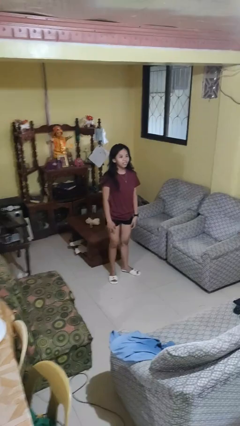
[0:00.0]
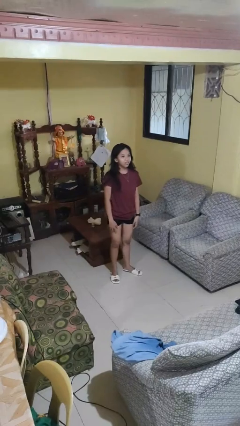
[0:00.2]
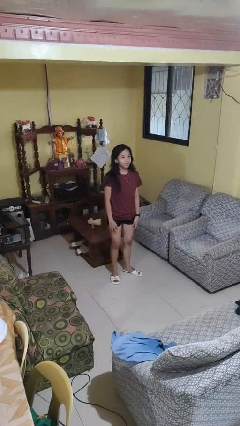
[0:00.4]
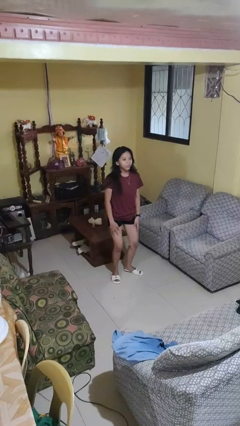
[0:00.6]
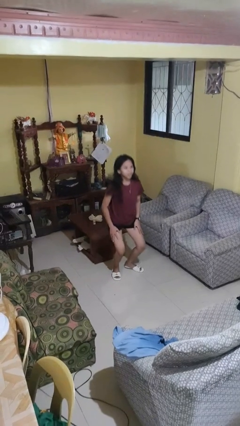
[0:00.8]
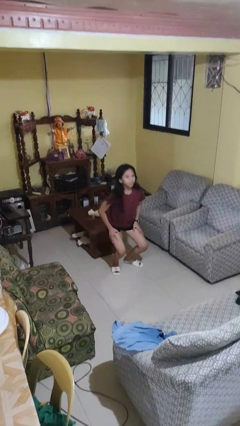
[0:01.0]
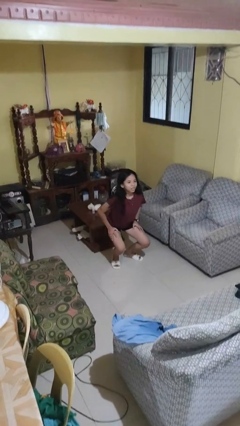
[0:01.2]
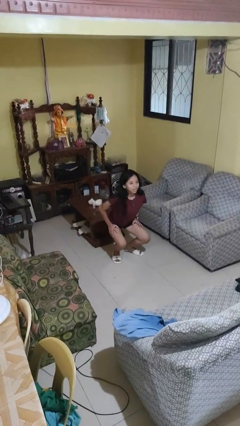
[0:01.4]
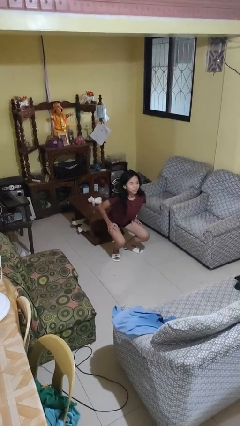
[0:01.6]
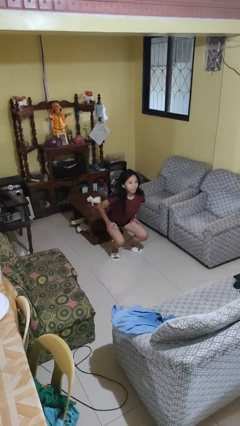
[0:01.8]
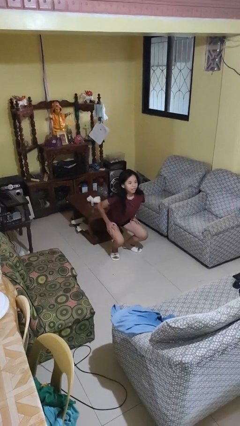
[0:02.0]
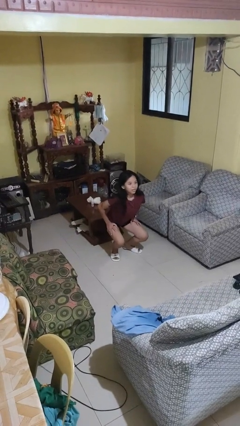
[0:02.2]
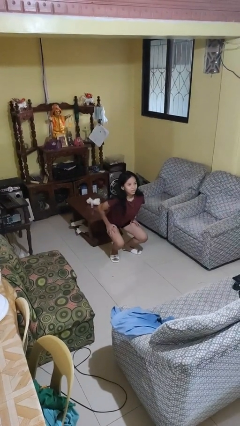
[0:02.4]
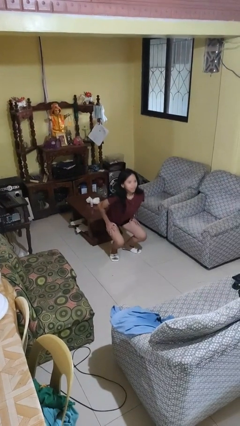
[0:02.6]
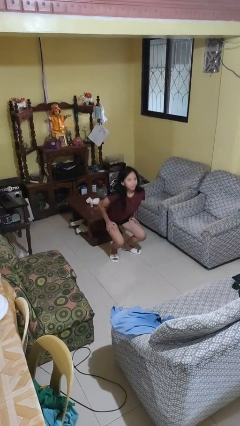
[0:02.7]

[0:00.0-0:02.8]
person squats

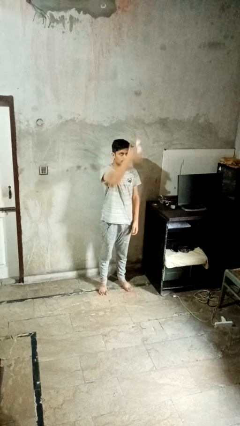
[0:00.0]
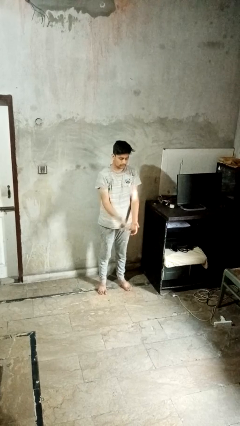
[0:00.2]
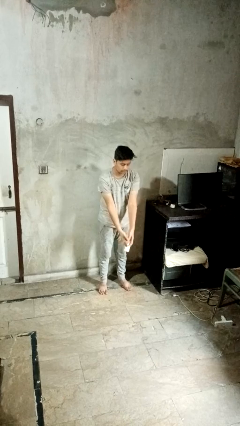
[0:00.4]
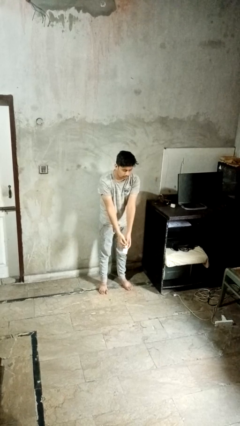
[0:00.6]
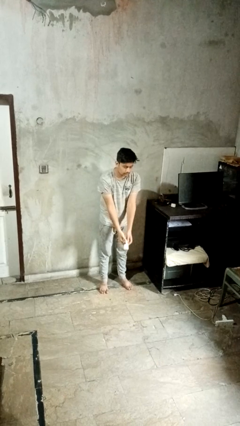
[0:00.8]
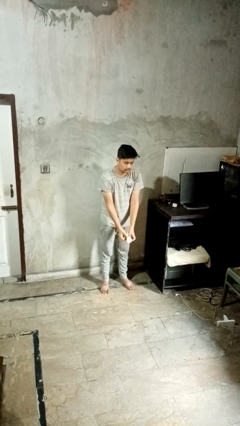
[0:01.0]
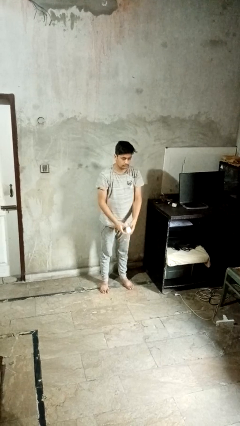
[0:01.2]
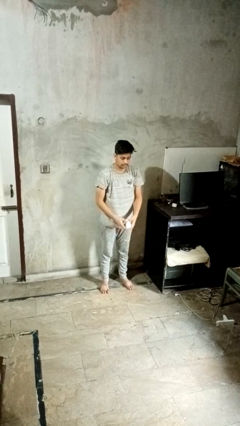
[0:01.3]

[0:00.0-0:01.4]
person catches dropped object

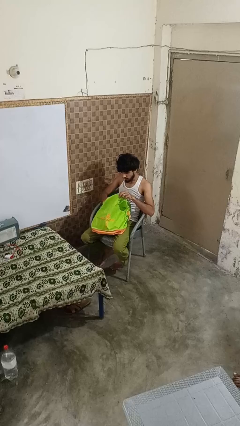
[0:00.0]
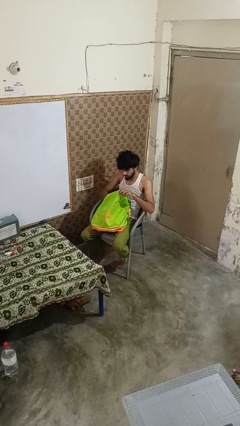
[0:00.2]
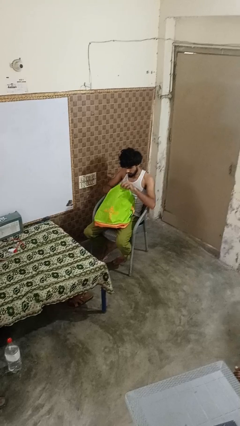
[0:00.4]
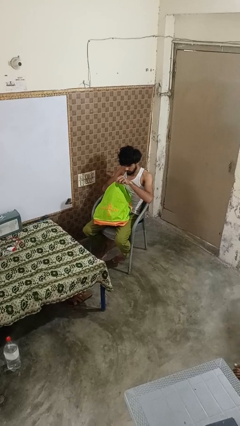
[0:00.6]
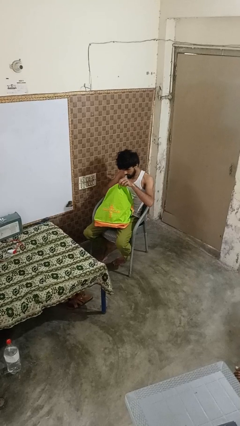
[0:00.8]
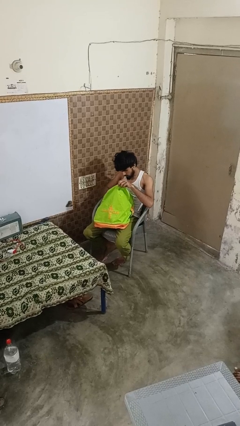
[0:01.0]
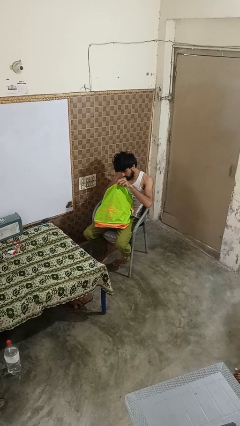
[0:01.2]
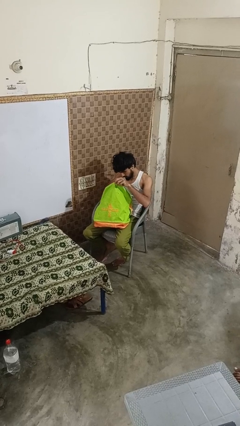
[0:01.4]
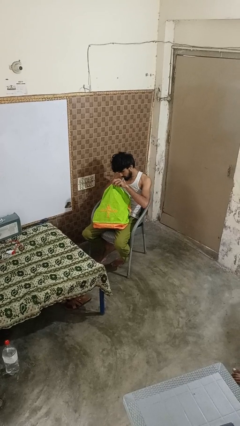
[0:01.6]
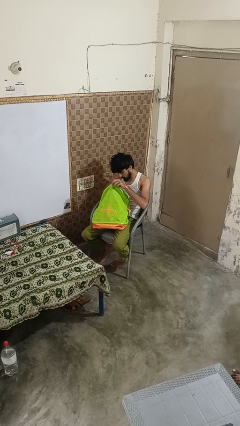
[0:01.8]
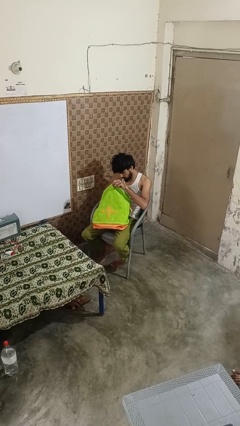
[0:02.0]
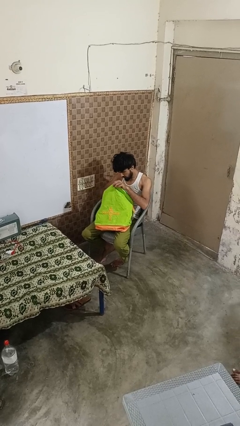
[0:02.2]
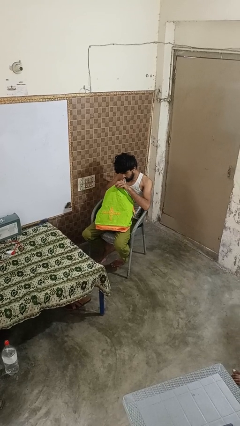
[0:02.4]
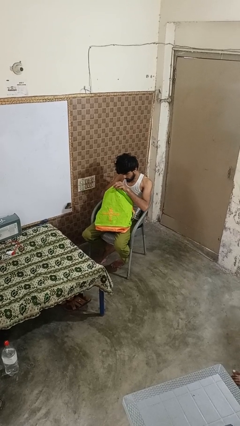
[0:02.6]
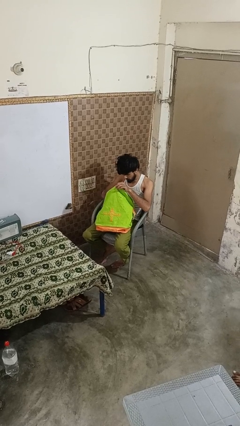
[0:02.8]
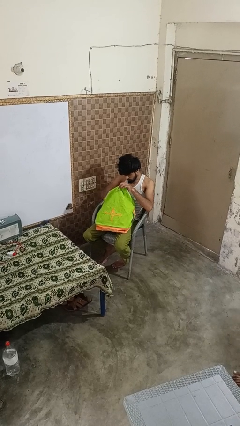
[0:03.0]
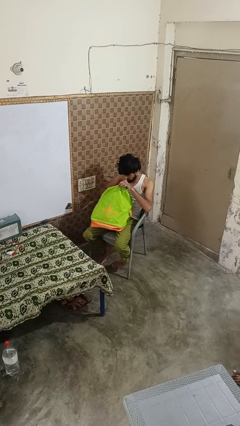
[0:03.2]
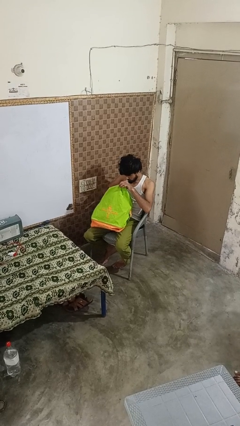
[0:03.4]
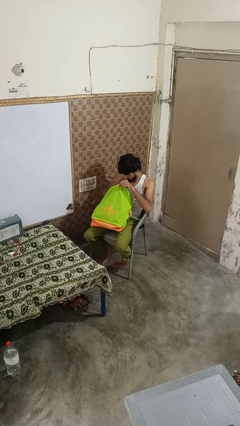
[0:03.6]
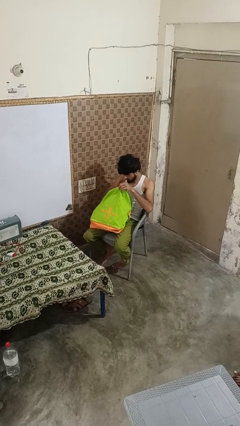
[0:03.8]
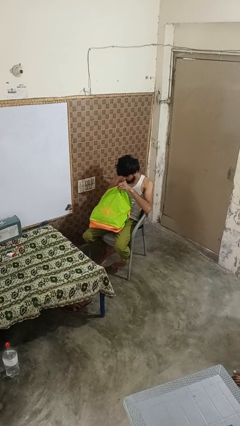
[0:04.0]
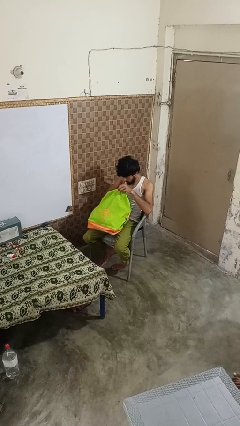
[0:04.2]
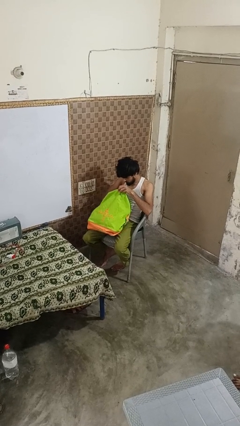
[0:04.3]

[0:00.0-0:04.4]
person searches in bag

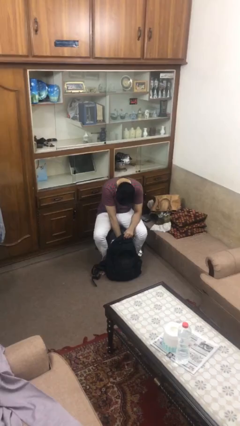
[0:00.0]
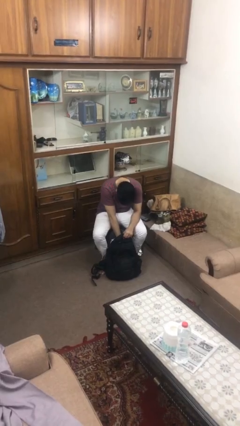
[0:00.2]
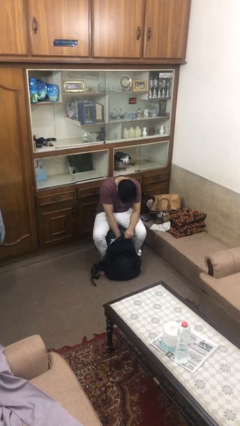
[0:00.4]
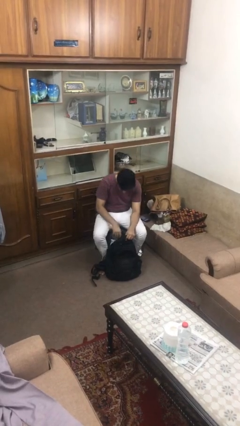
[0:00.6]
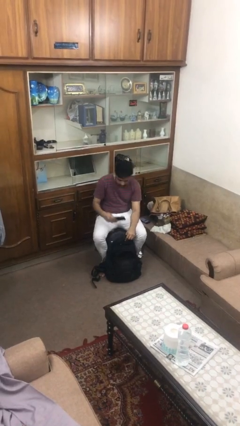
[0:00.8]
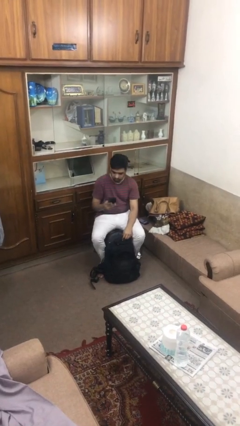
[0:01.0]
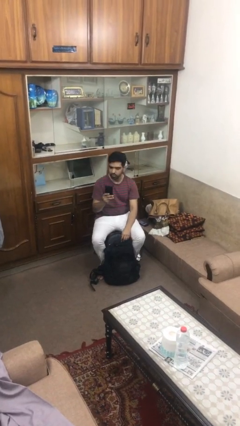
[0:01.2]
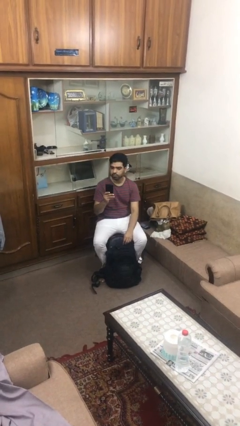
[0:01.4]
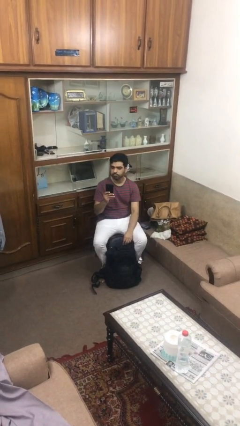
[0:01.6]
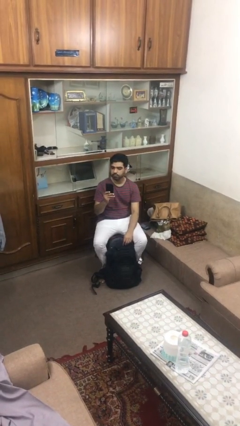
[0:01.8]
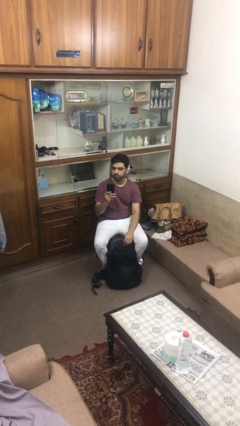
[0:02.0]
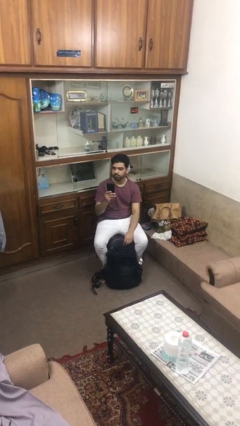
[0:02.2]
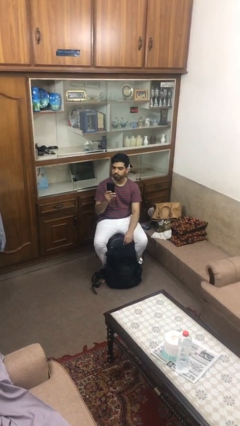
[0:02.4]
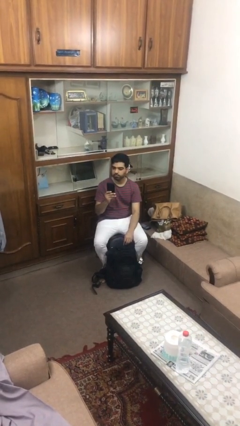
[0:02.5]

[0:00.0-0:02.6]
person takes object from backpack

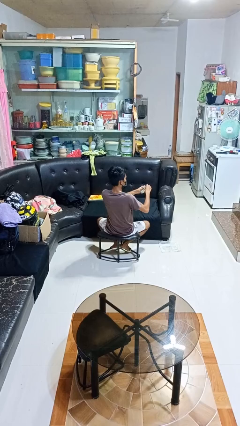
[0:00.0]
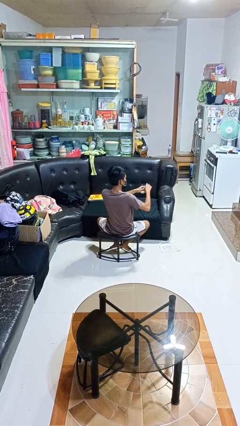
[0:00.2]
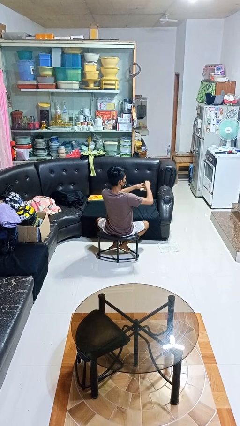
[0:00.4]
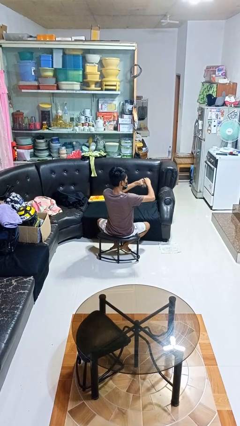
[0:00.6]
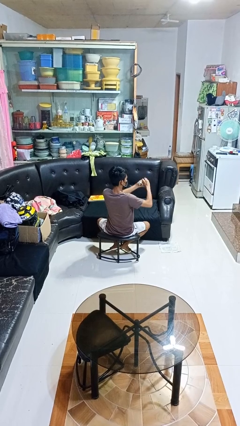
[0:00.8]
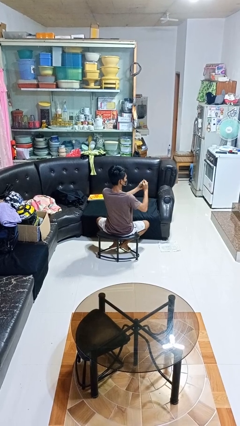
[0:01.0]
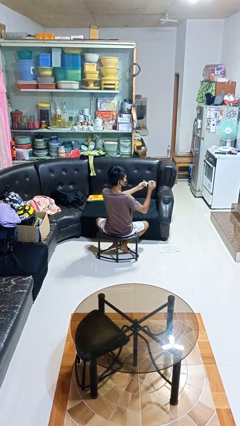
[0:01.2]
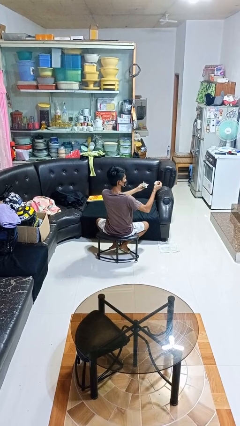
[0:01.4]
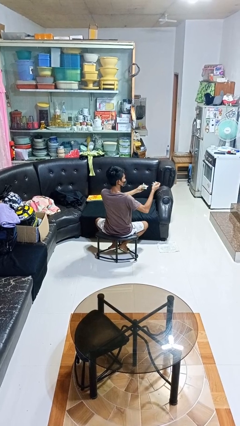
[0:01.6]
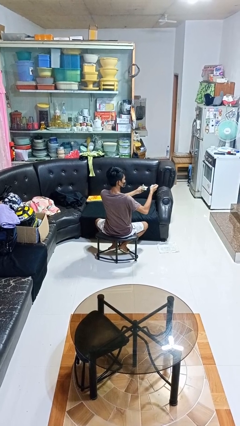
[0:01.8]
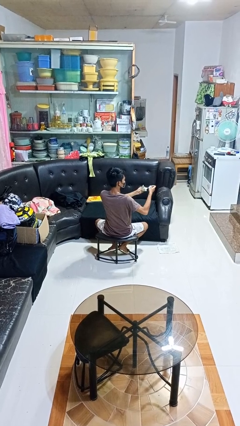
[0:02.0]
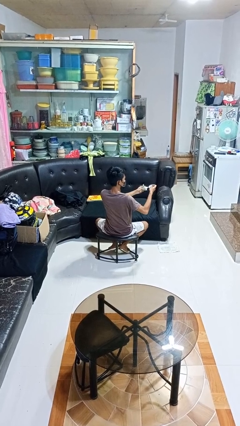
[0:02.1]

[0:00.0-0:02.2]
person tears paper

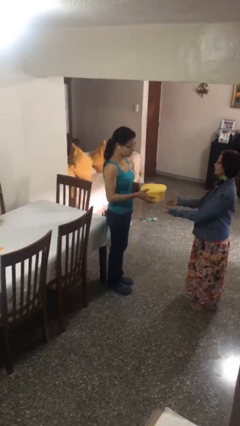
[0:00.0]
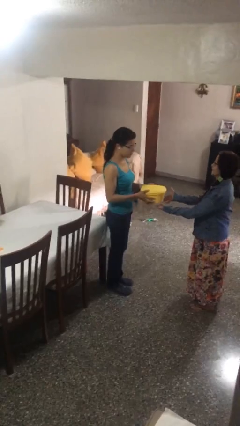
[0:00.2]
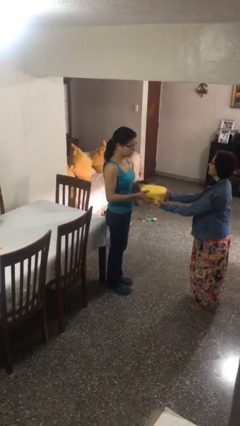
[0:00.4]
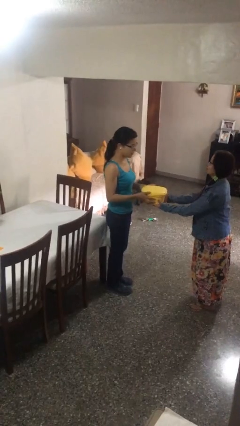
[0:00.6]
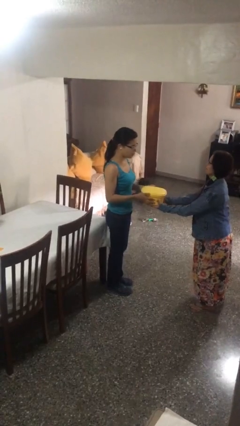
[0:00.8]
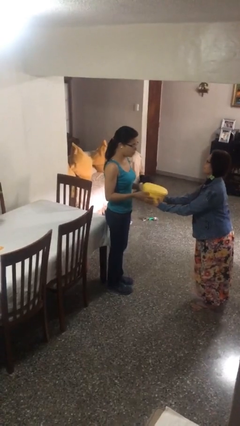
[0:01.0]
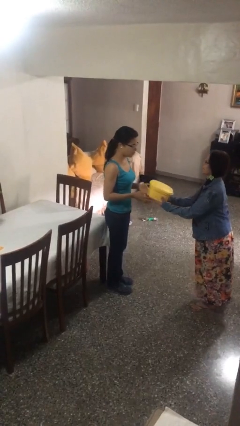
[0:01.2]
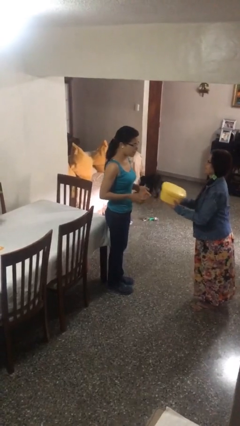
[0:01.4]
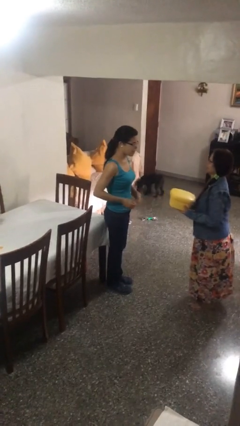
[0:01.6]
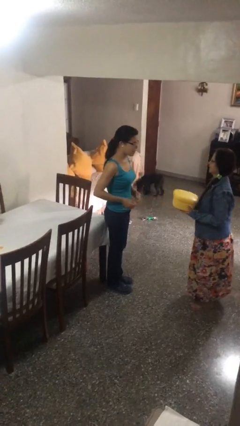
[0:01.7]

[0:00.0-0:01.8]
person transfers object to person

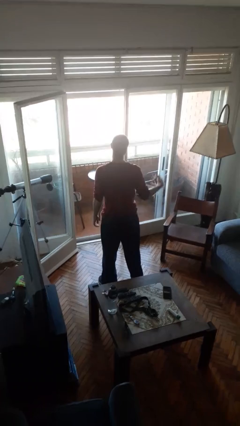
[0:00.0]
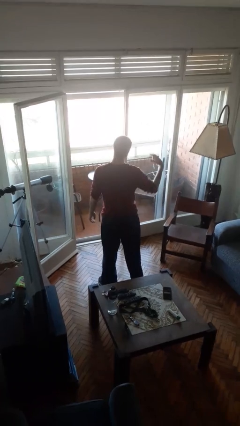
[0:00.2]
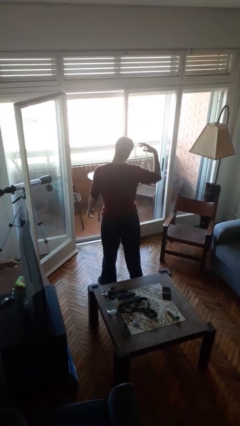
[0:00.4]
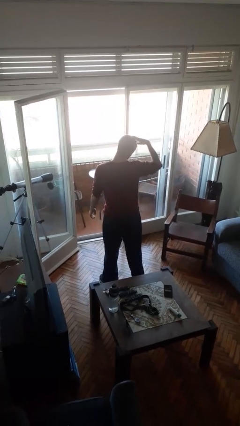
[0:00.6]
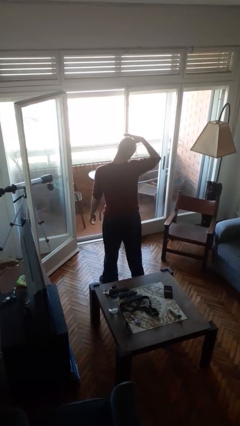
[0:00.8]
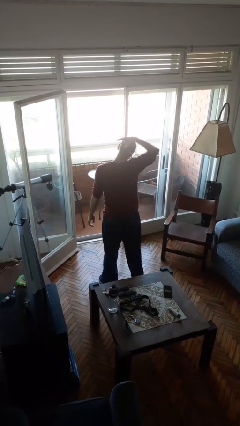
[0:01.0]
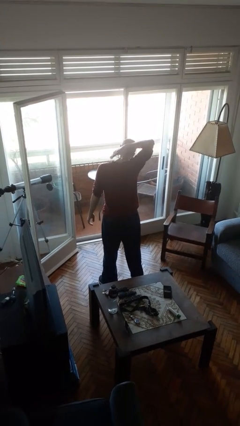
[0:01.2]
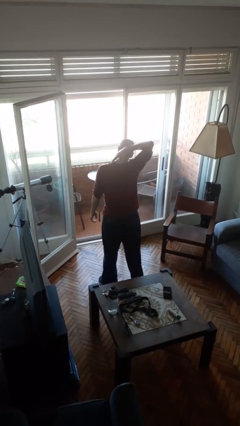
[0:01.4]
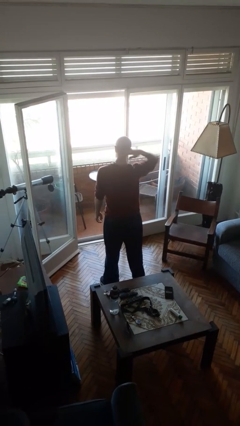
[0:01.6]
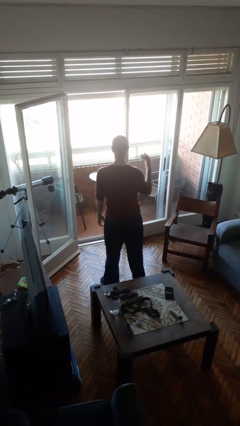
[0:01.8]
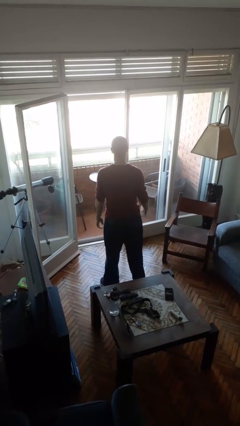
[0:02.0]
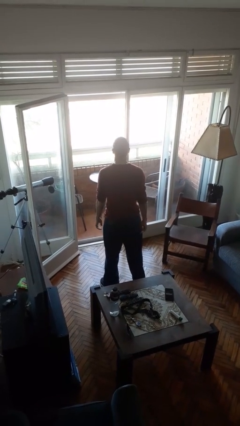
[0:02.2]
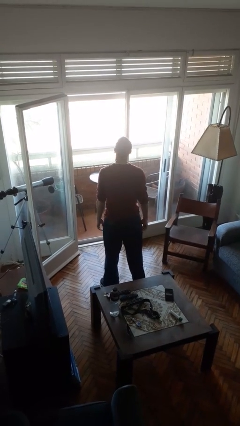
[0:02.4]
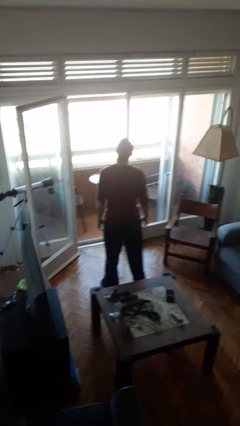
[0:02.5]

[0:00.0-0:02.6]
person puts on necklace
